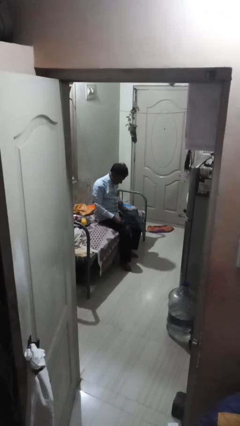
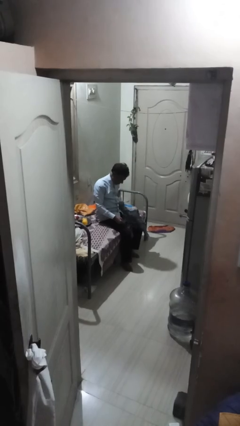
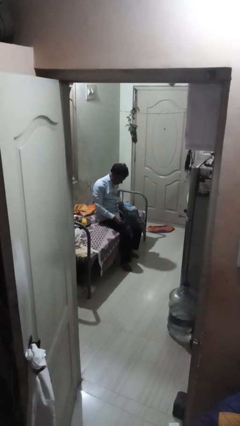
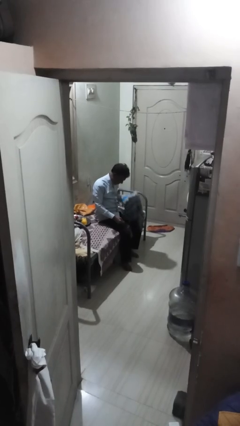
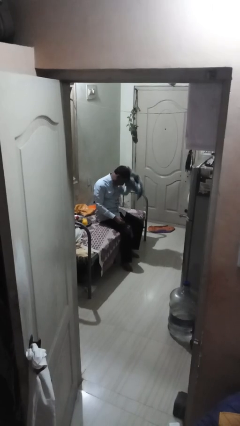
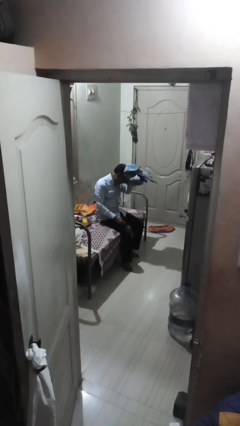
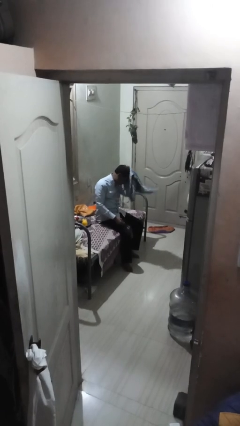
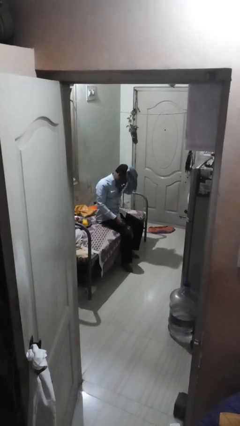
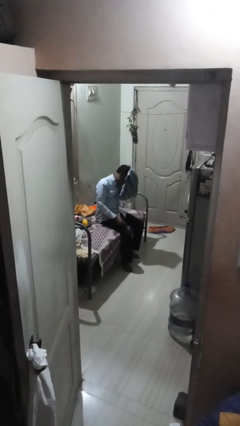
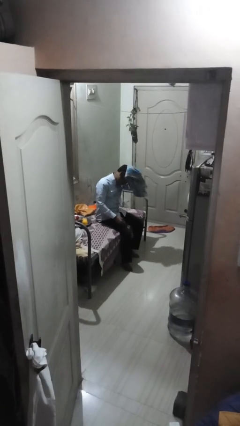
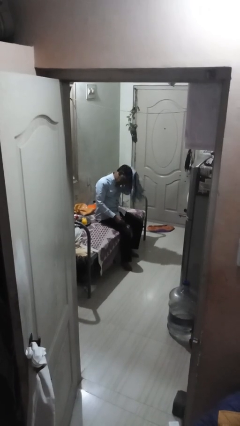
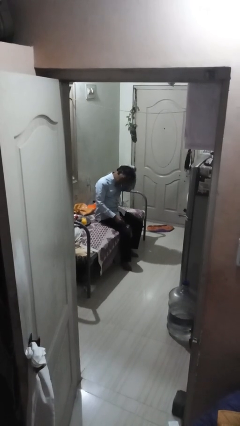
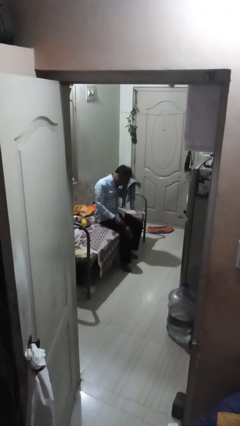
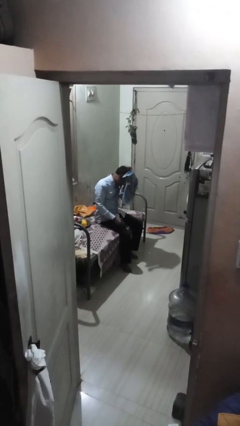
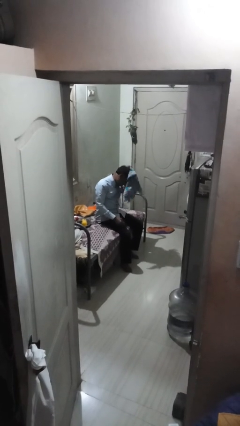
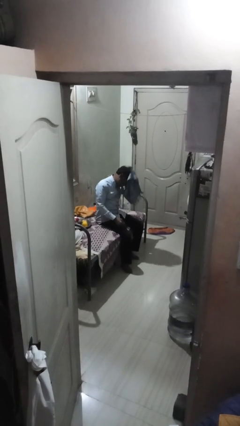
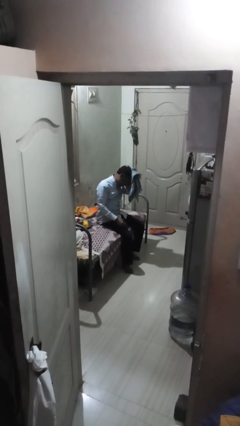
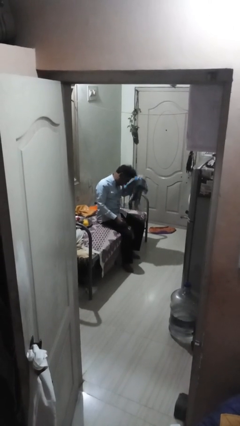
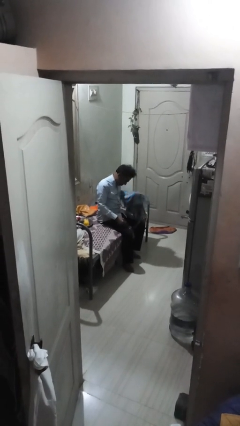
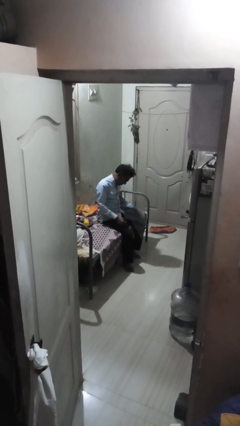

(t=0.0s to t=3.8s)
person dries hair with towel

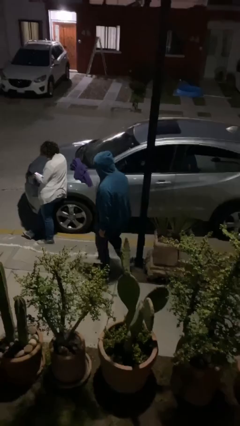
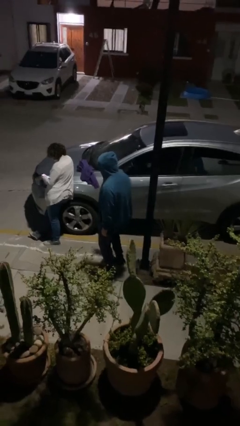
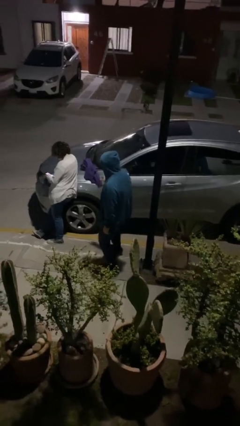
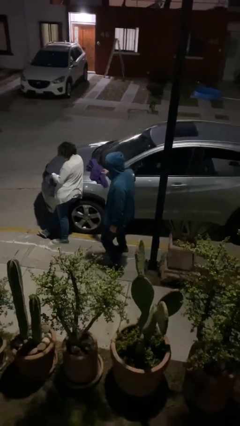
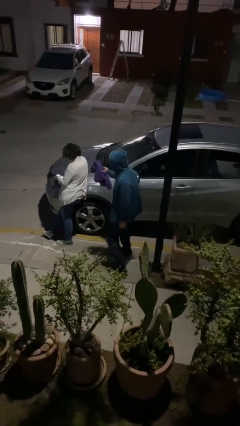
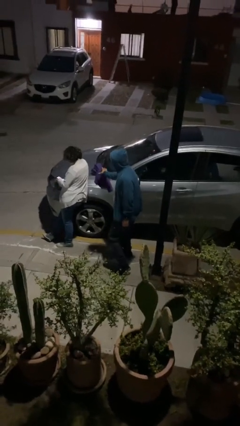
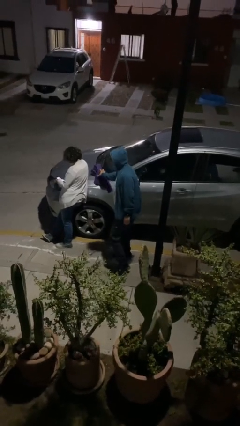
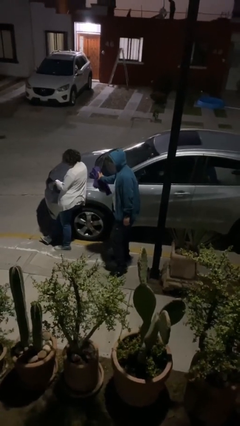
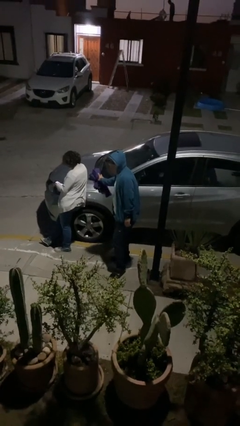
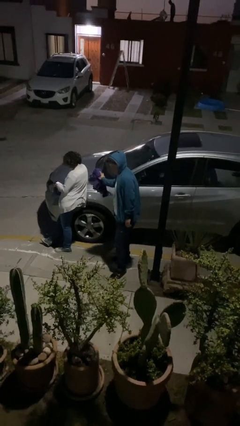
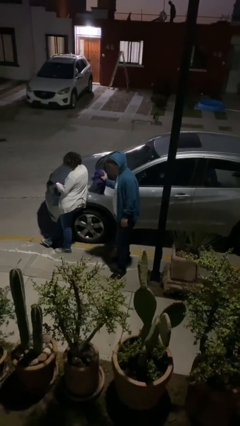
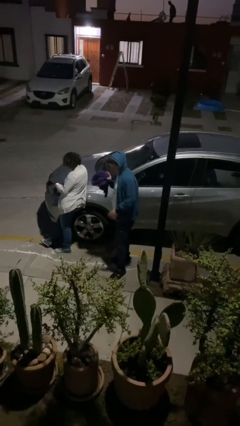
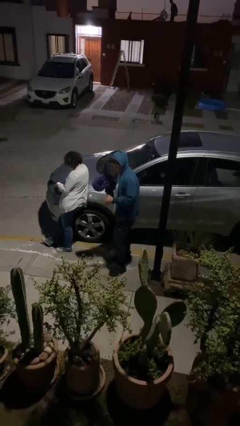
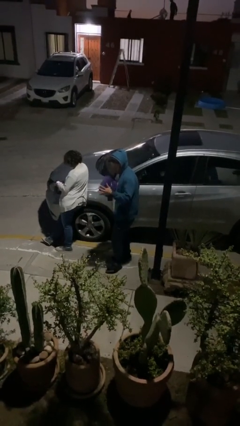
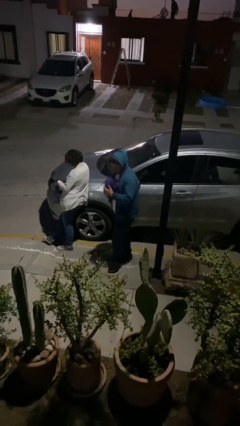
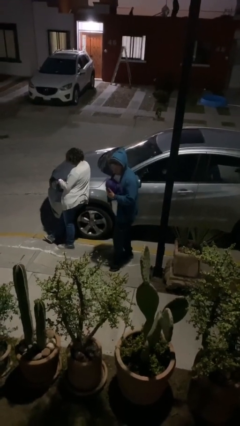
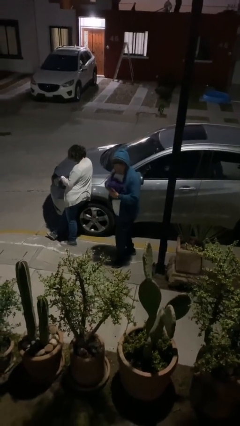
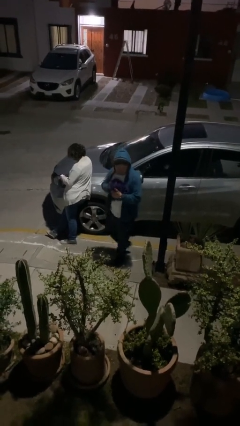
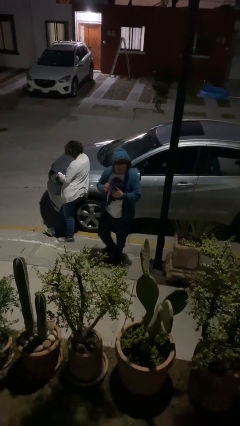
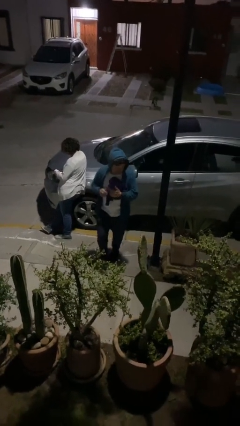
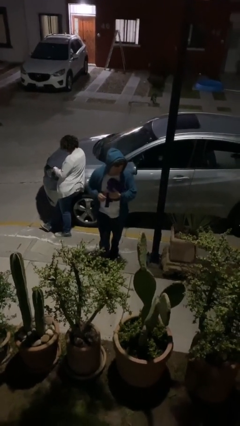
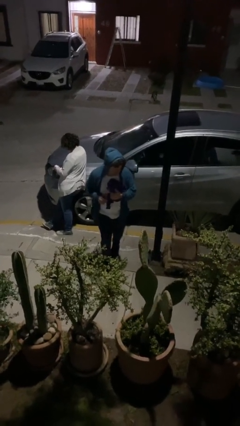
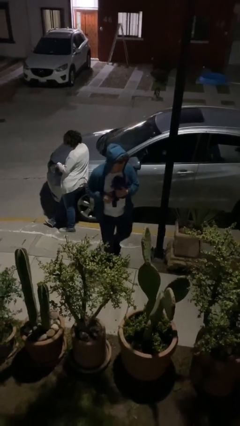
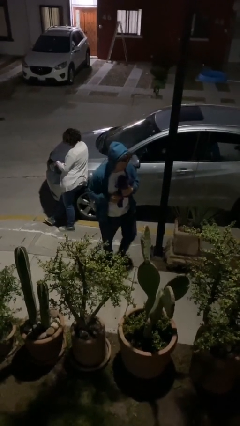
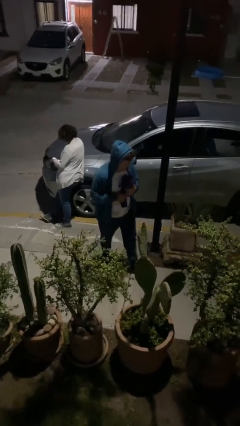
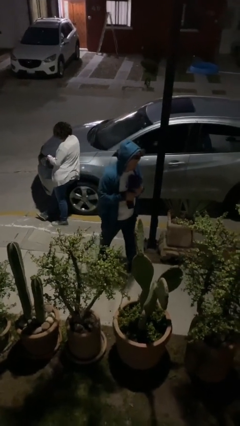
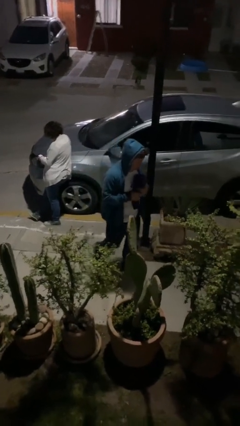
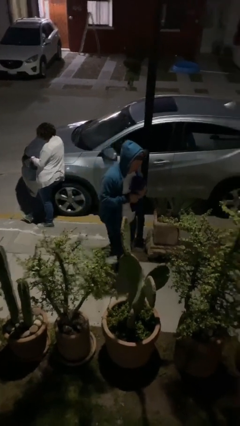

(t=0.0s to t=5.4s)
person steals object from person

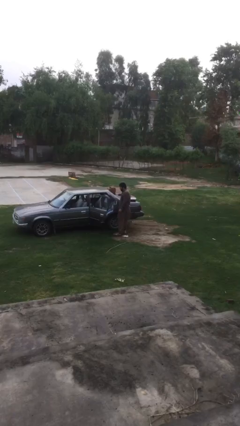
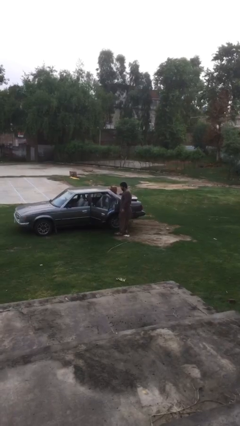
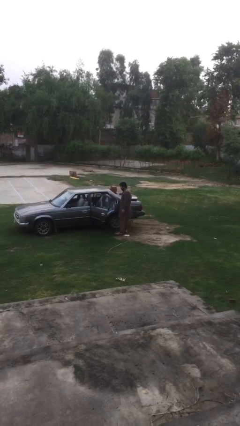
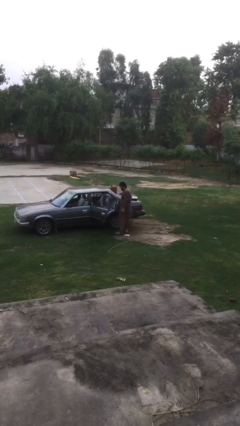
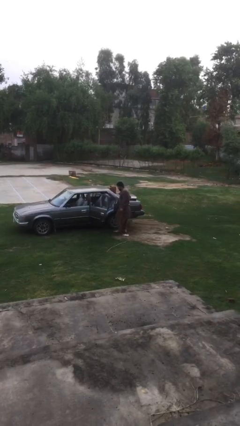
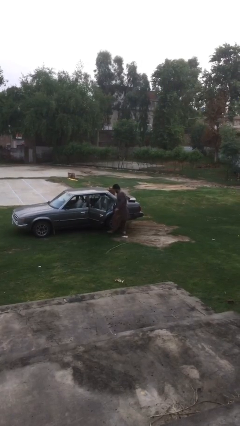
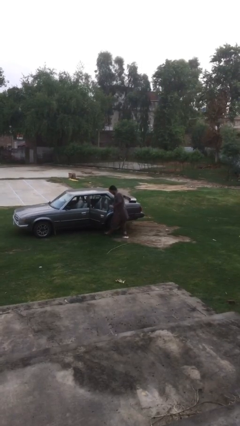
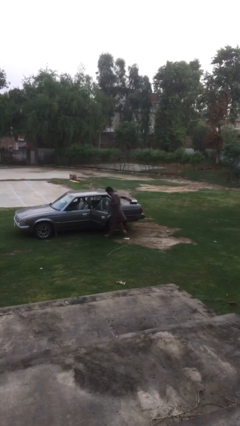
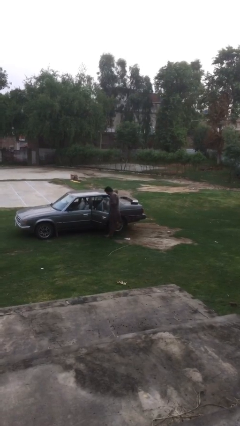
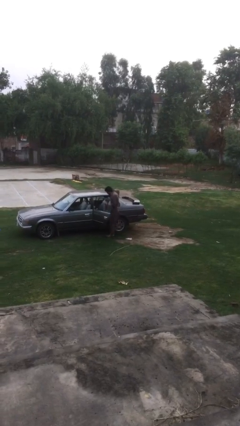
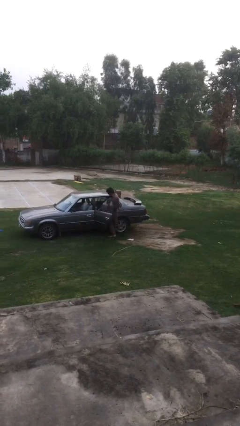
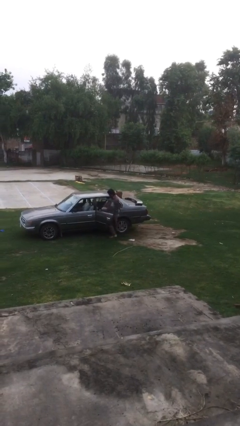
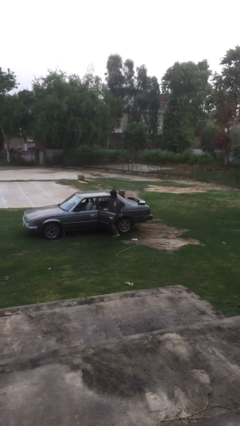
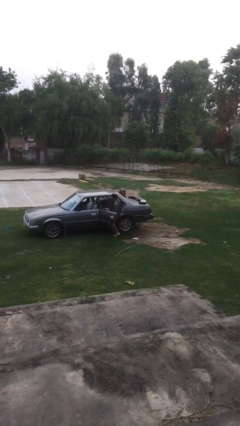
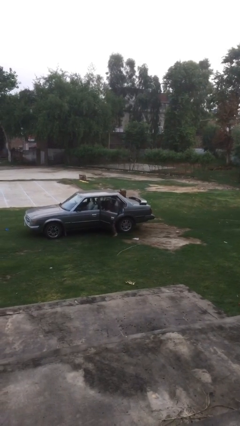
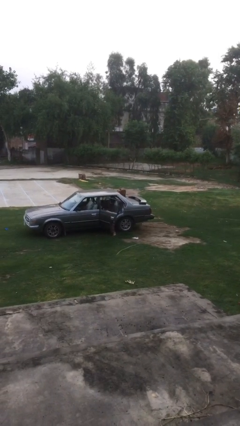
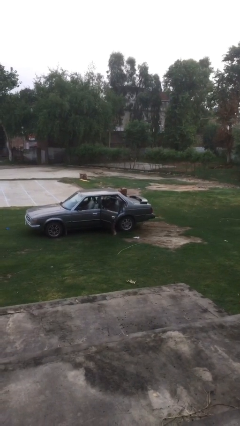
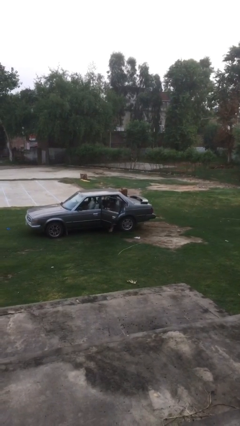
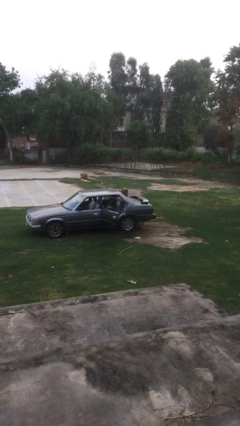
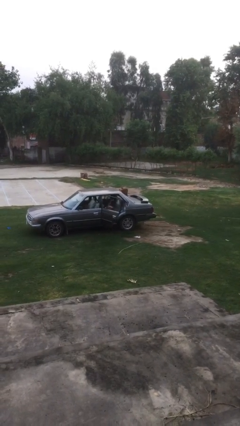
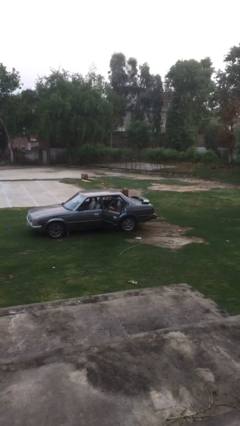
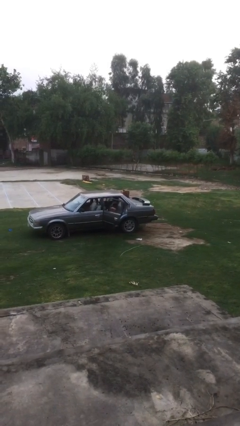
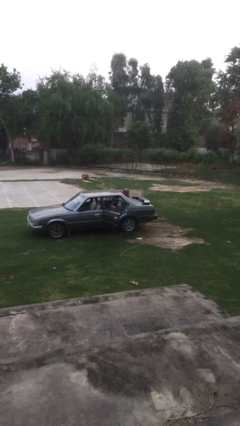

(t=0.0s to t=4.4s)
person enters car

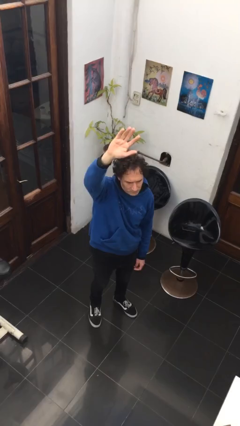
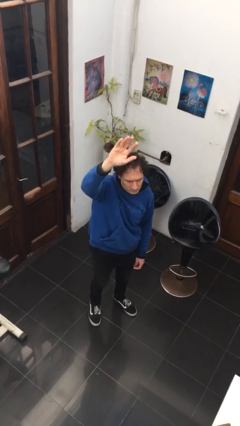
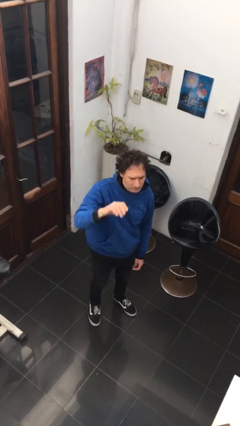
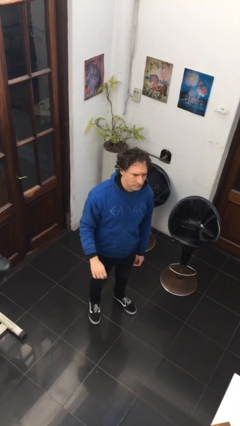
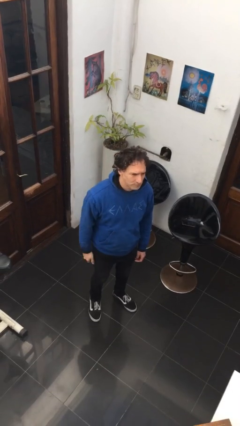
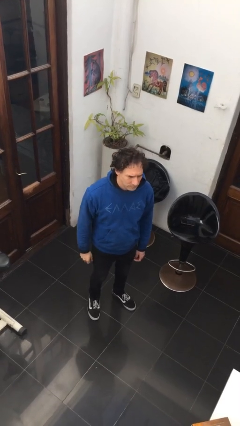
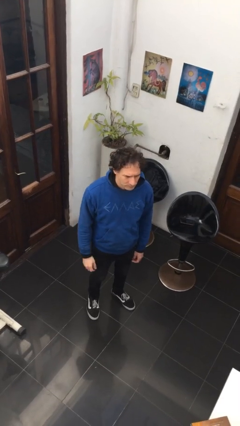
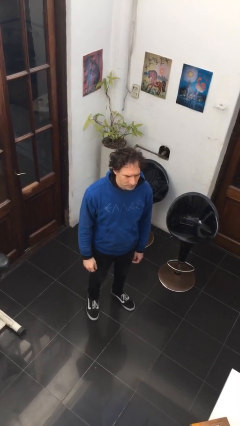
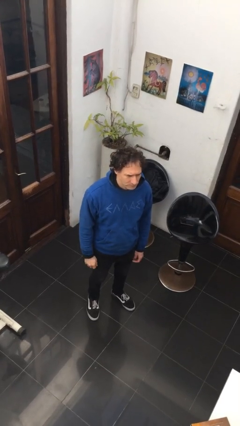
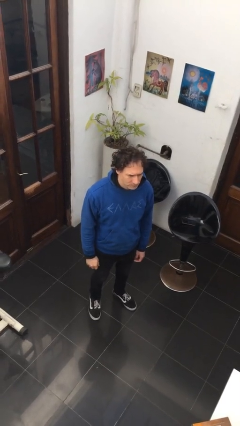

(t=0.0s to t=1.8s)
person gestures lower hand

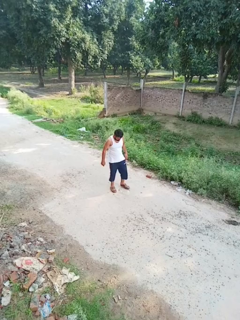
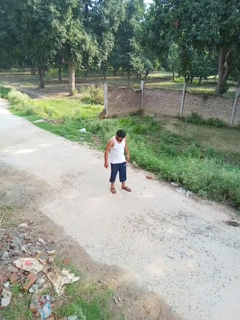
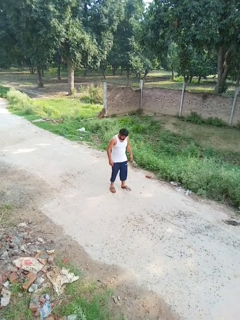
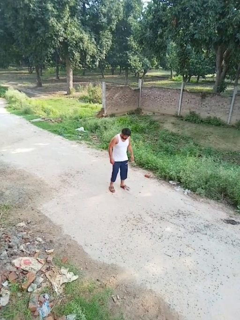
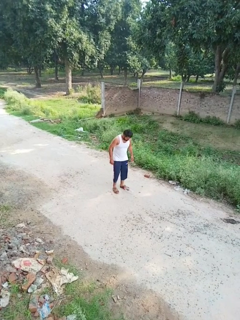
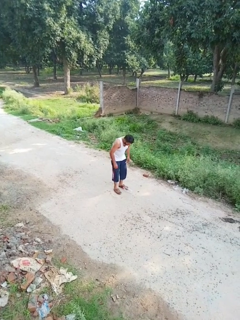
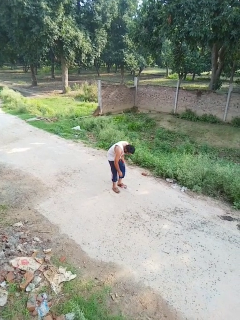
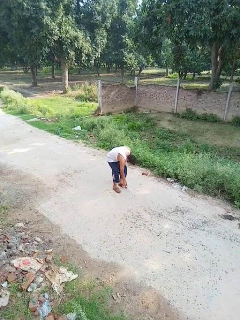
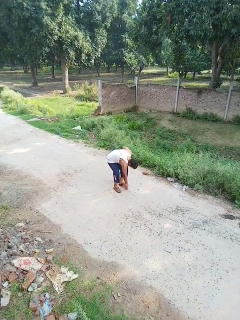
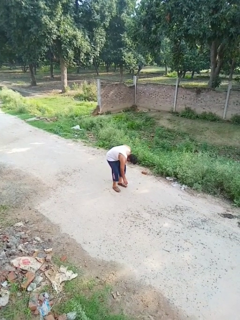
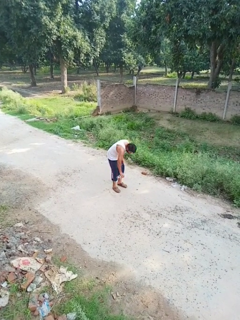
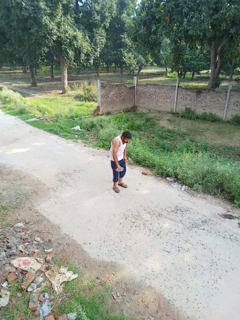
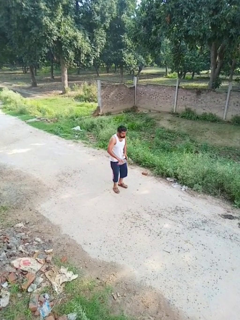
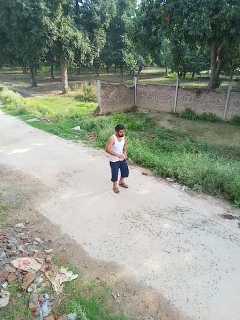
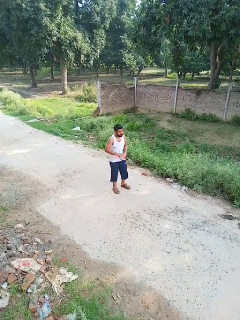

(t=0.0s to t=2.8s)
person picks up object from floor
